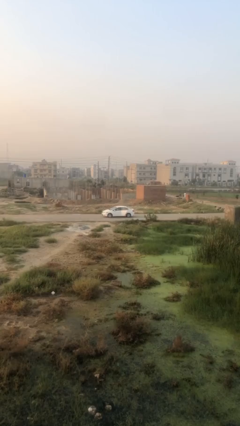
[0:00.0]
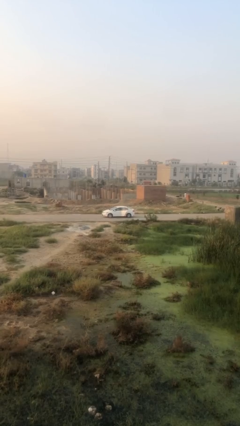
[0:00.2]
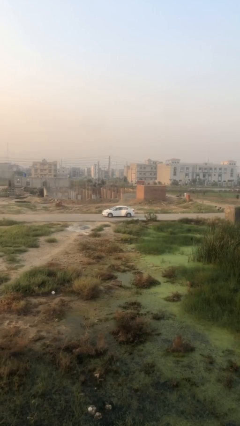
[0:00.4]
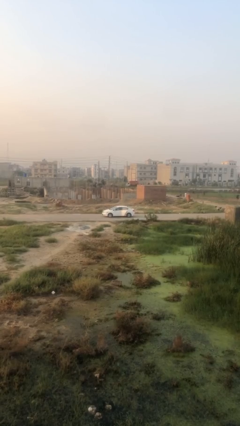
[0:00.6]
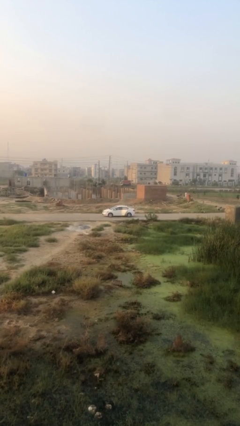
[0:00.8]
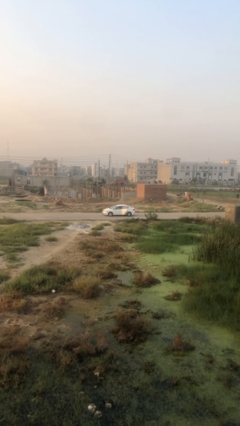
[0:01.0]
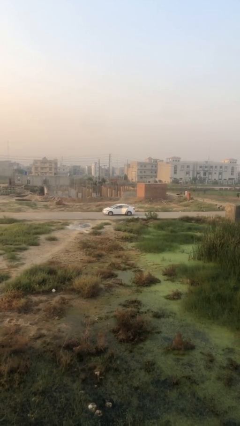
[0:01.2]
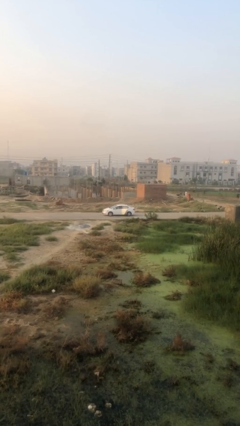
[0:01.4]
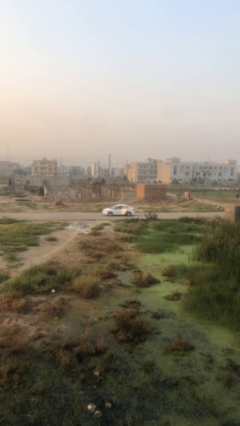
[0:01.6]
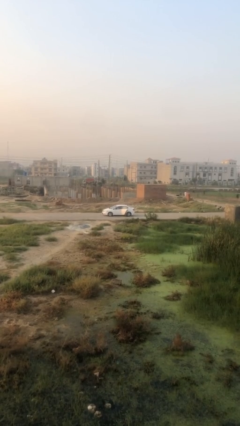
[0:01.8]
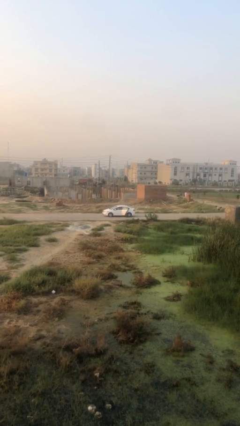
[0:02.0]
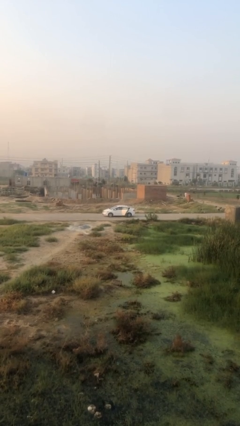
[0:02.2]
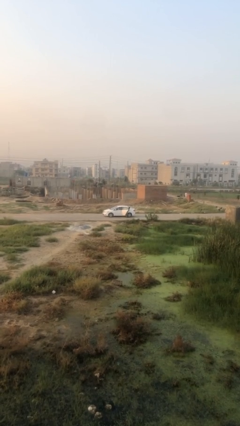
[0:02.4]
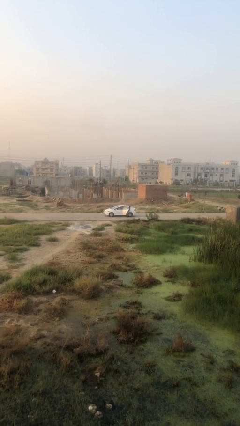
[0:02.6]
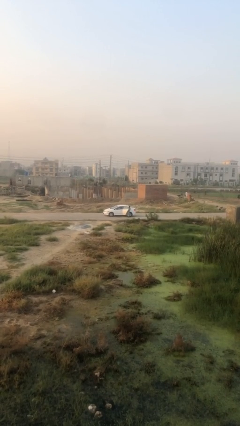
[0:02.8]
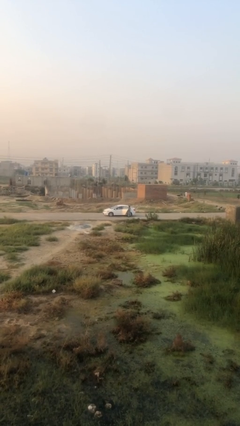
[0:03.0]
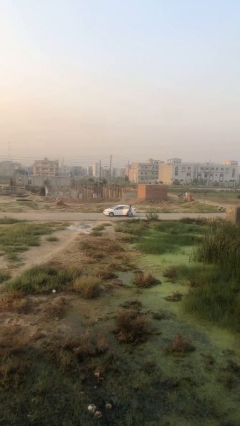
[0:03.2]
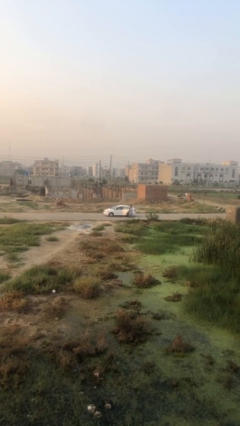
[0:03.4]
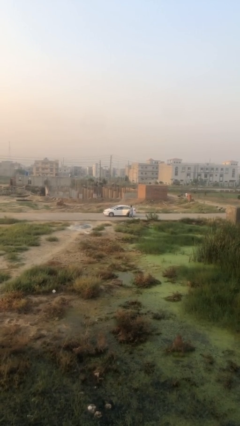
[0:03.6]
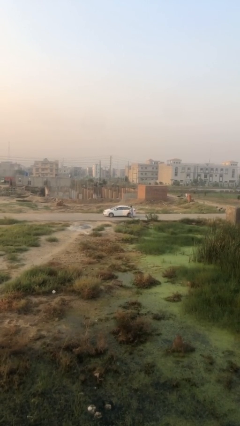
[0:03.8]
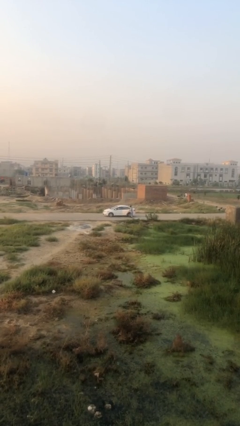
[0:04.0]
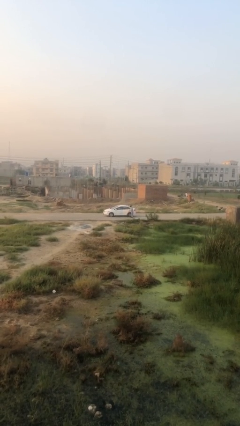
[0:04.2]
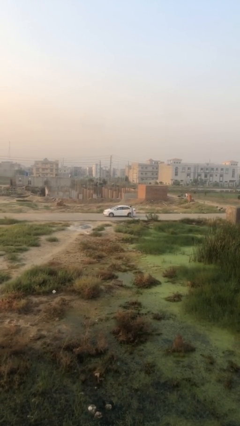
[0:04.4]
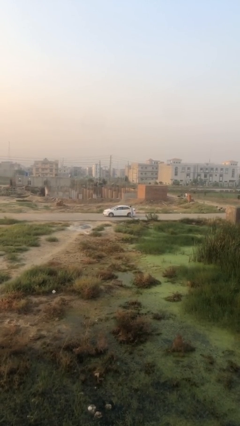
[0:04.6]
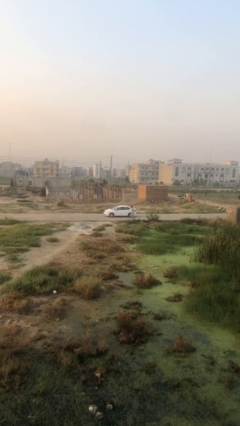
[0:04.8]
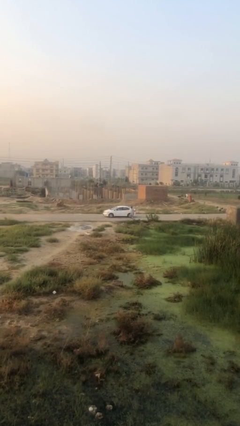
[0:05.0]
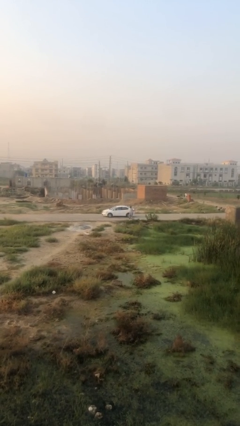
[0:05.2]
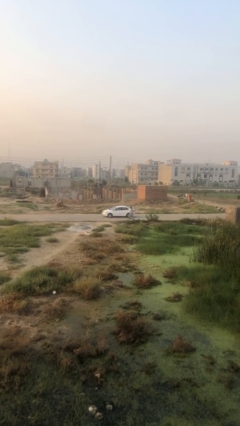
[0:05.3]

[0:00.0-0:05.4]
car drops off person

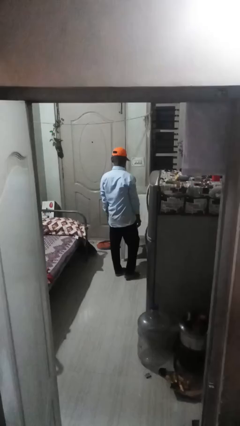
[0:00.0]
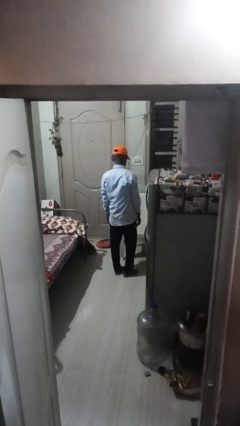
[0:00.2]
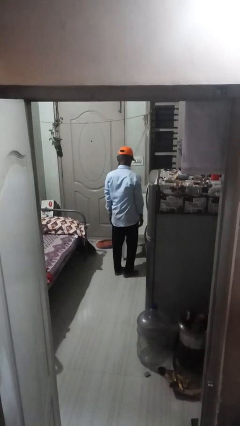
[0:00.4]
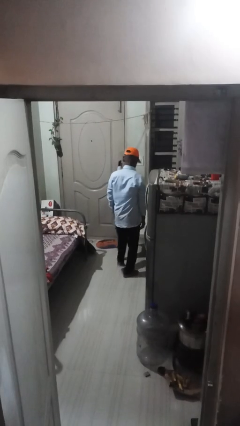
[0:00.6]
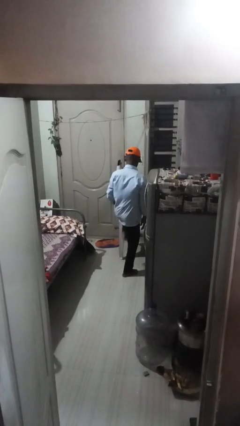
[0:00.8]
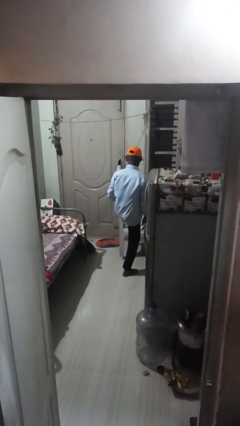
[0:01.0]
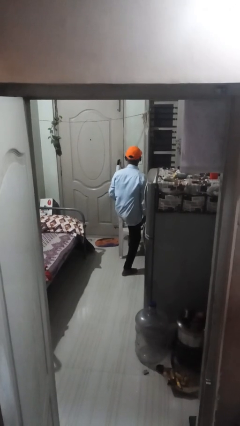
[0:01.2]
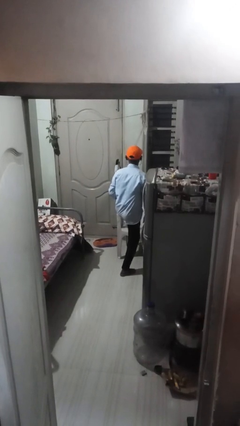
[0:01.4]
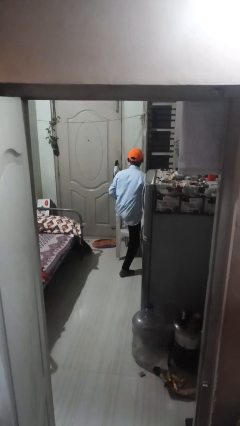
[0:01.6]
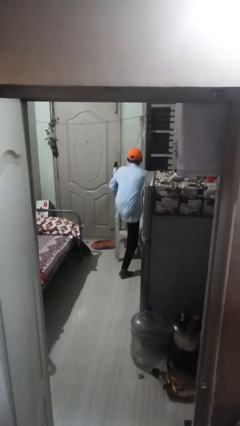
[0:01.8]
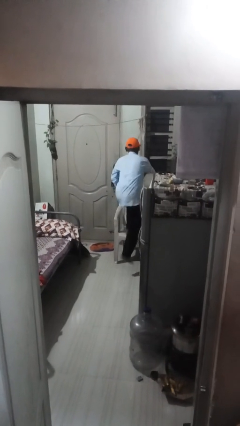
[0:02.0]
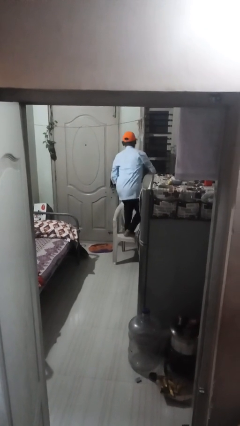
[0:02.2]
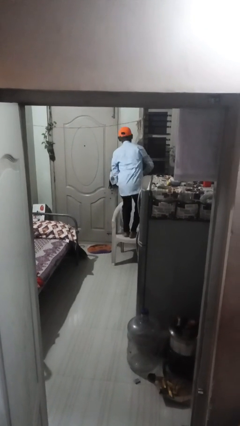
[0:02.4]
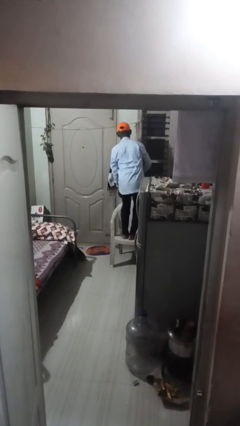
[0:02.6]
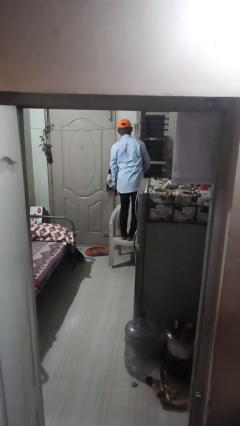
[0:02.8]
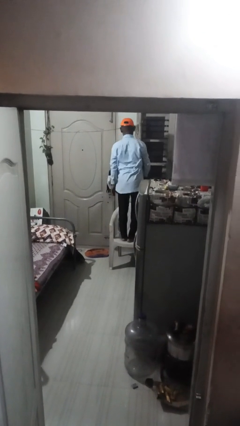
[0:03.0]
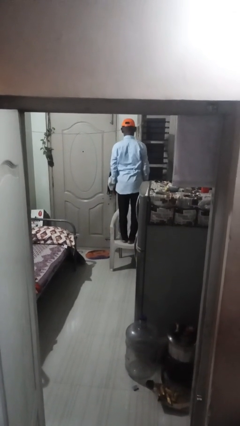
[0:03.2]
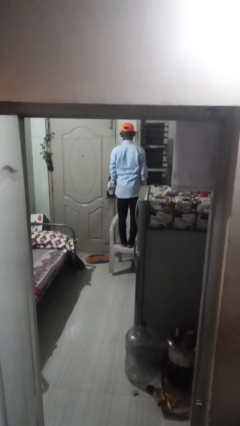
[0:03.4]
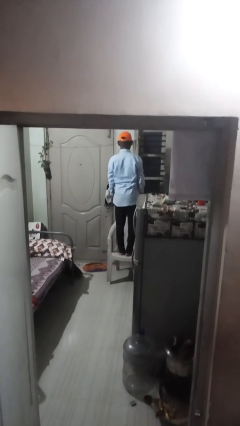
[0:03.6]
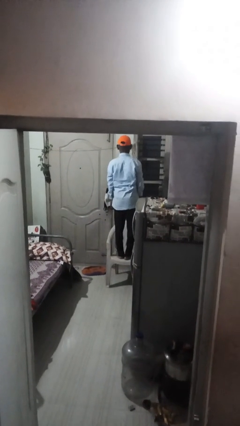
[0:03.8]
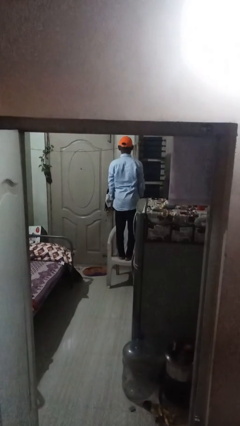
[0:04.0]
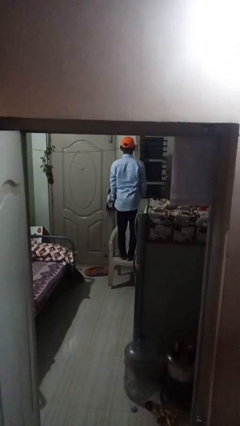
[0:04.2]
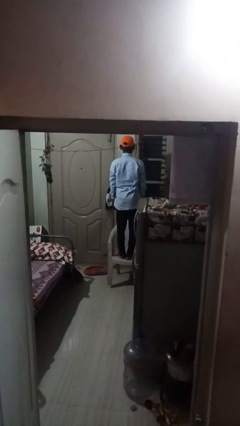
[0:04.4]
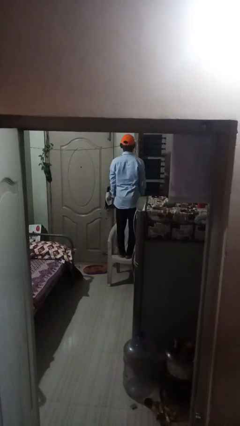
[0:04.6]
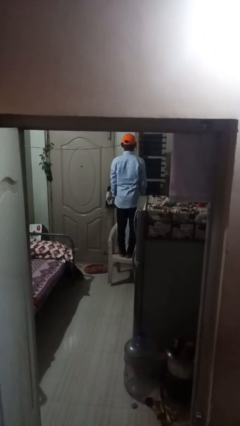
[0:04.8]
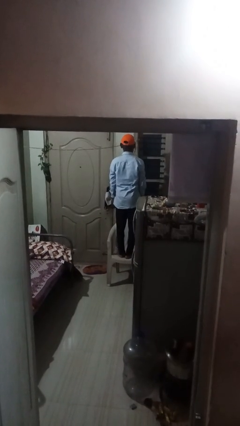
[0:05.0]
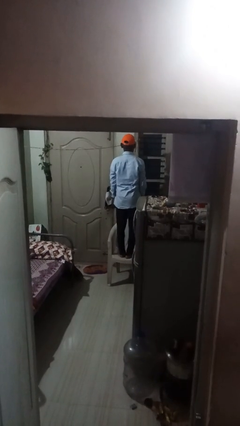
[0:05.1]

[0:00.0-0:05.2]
person climbs on chair

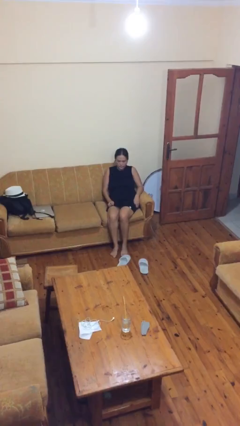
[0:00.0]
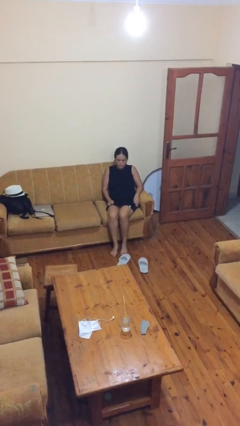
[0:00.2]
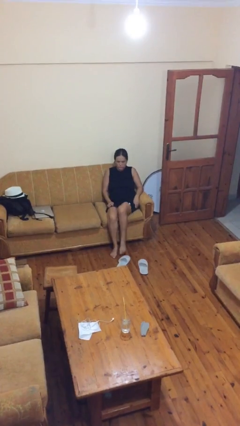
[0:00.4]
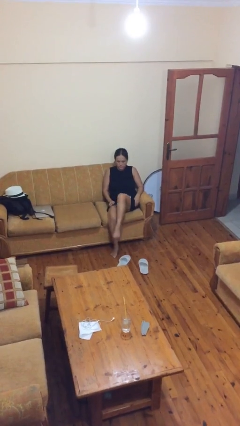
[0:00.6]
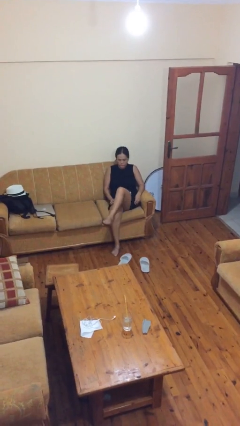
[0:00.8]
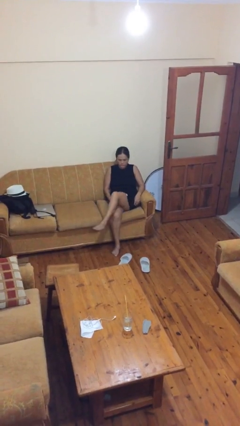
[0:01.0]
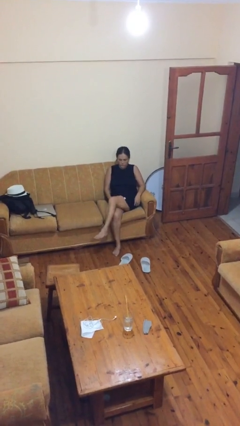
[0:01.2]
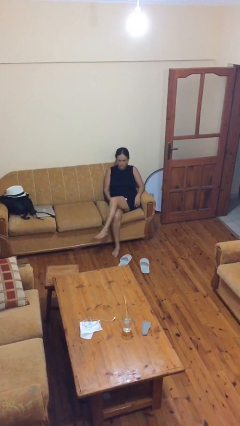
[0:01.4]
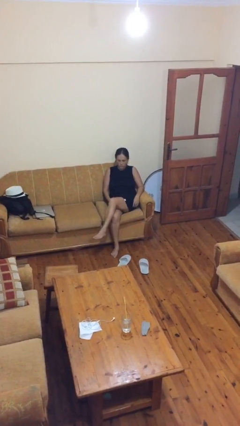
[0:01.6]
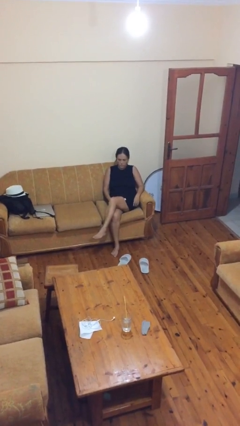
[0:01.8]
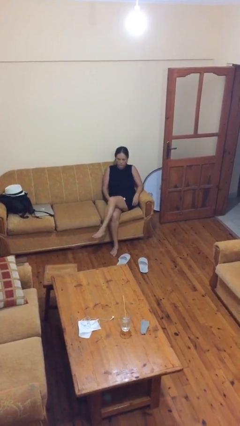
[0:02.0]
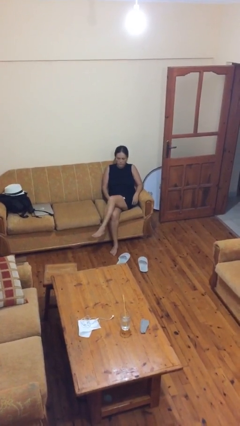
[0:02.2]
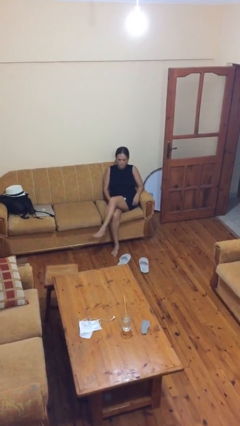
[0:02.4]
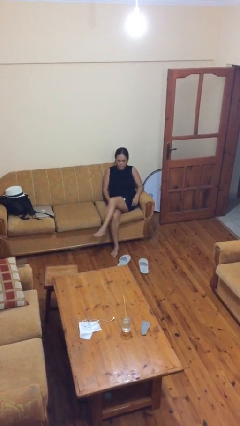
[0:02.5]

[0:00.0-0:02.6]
person crosses legs

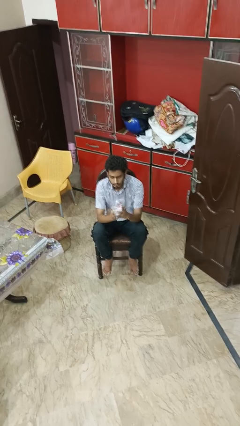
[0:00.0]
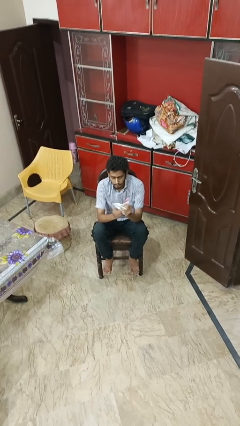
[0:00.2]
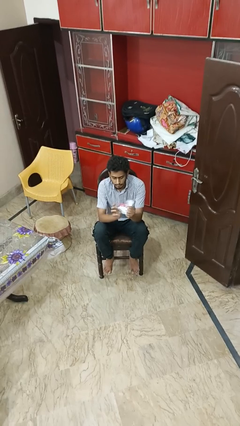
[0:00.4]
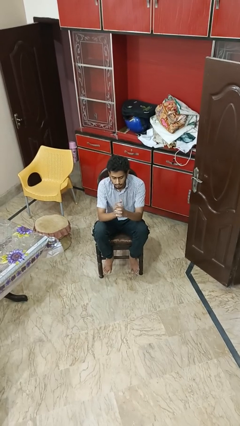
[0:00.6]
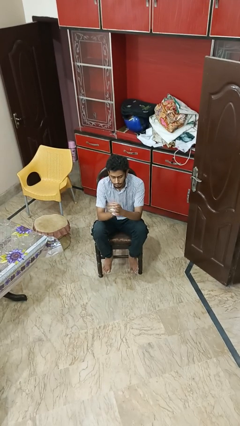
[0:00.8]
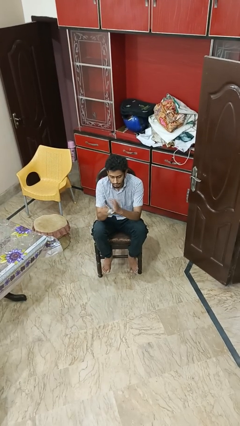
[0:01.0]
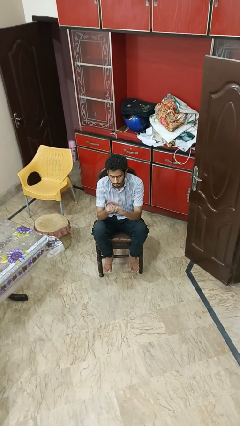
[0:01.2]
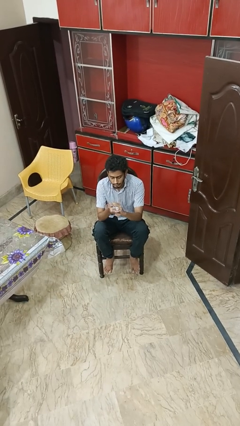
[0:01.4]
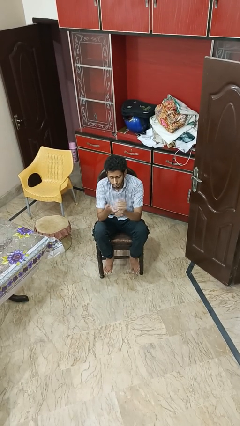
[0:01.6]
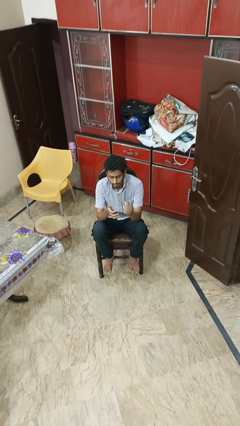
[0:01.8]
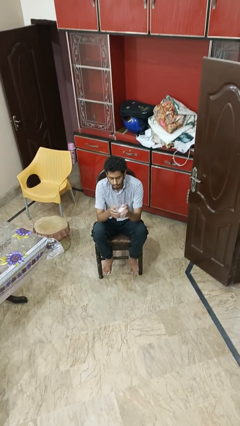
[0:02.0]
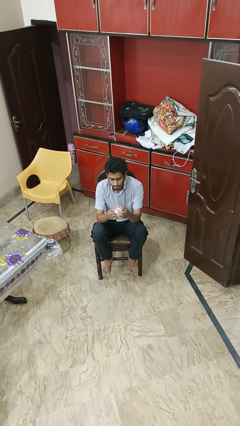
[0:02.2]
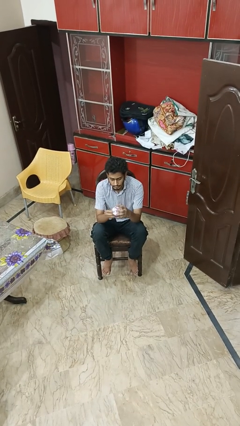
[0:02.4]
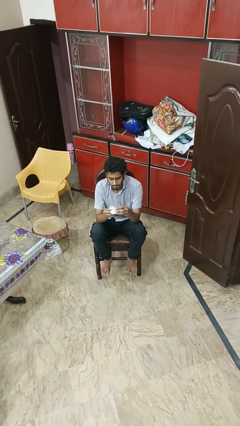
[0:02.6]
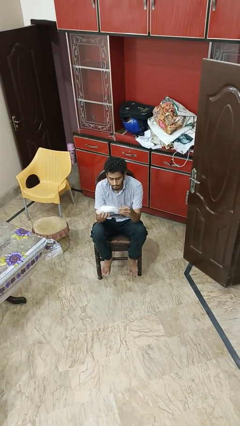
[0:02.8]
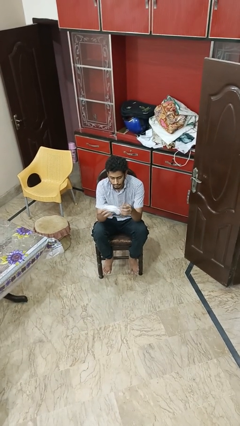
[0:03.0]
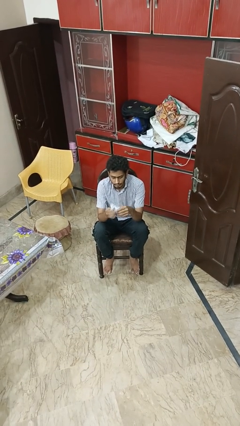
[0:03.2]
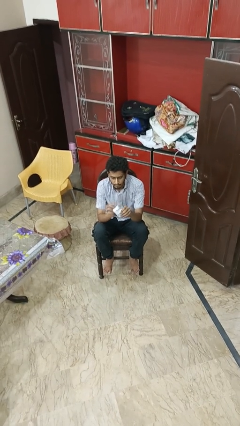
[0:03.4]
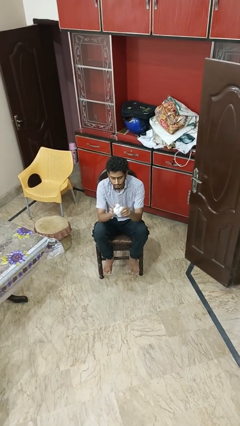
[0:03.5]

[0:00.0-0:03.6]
person crumples paper

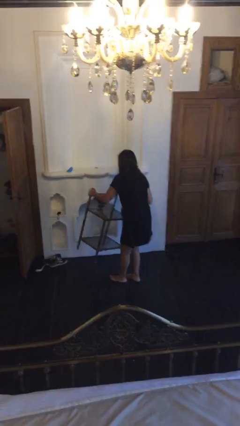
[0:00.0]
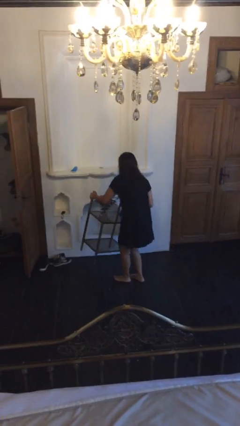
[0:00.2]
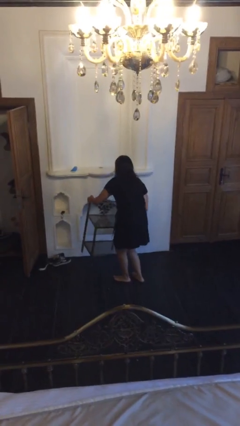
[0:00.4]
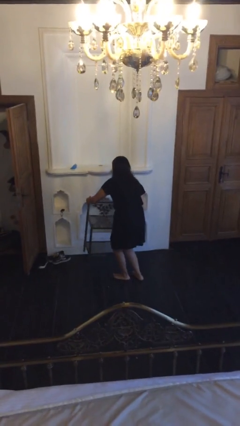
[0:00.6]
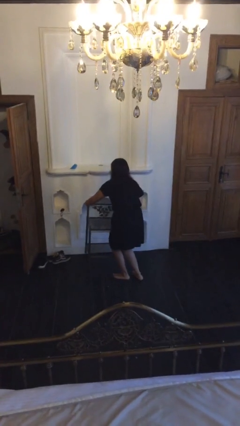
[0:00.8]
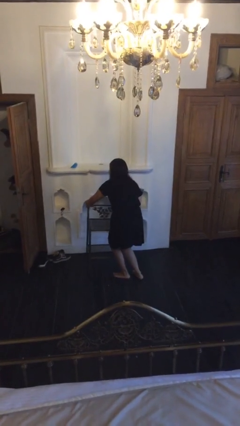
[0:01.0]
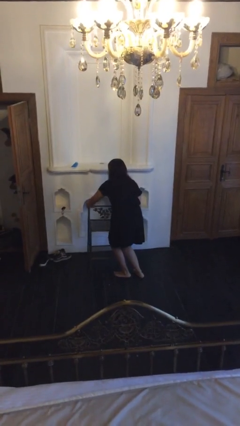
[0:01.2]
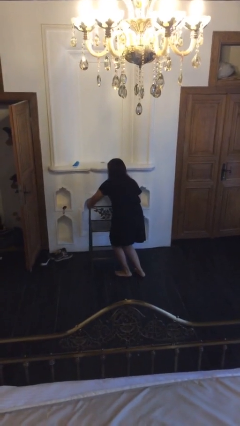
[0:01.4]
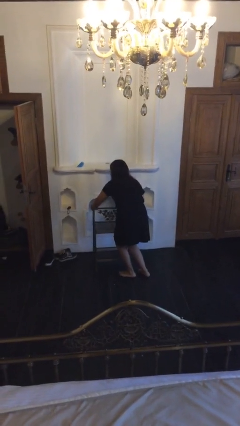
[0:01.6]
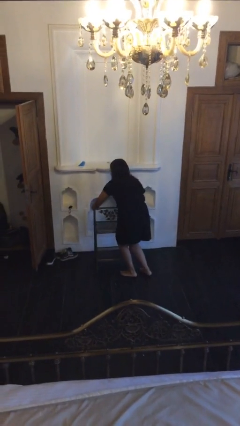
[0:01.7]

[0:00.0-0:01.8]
person puts down object on floor
